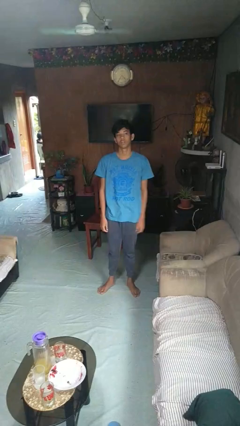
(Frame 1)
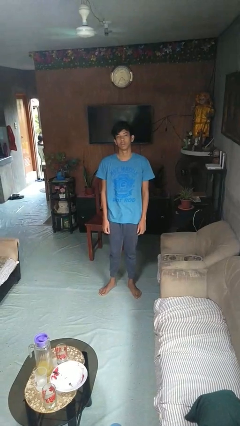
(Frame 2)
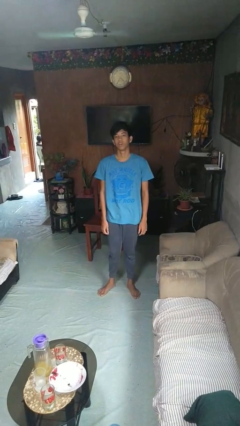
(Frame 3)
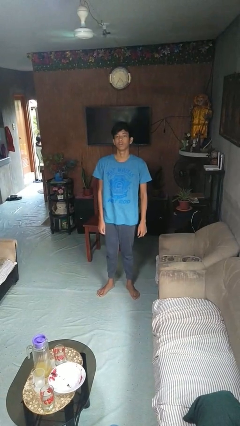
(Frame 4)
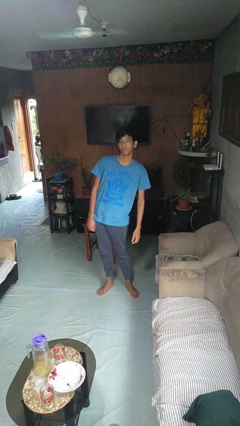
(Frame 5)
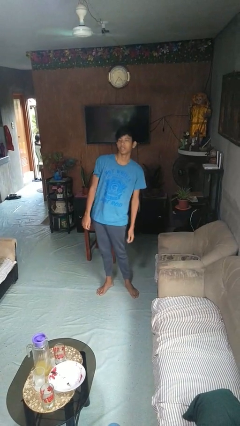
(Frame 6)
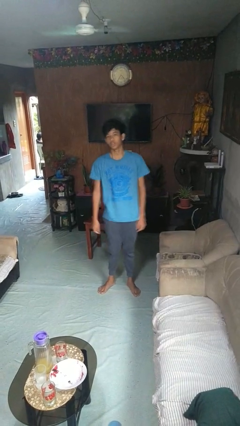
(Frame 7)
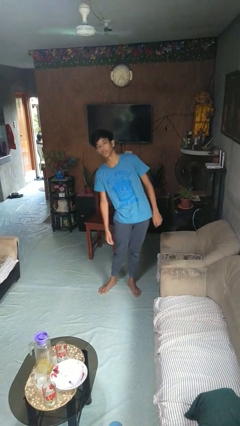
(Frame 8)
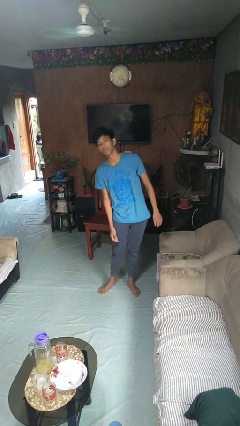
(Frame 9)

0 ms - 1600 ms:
person dances in place

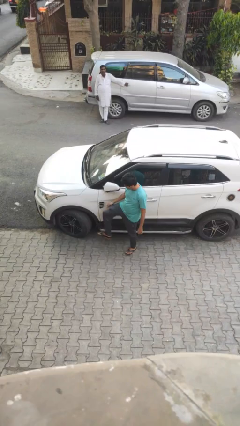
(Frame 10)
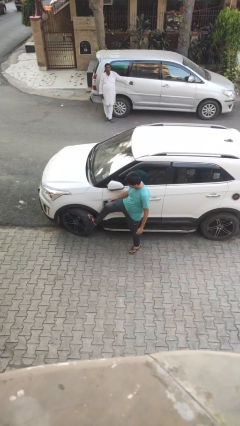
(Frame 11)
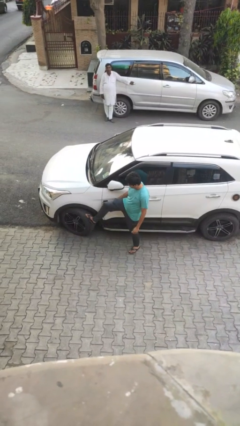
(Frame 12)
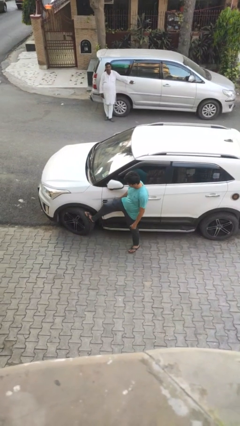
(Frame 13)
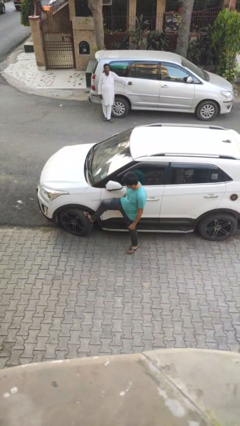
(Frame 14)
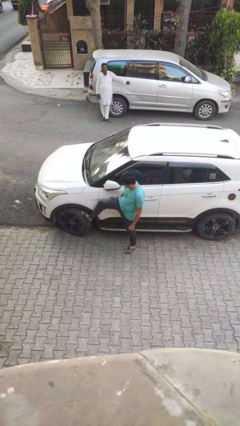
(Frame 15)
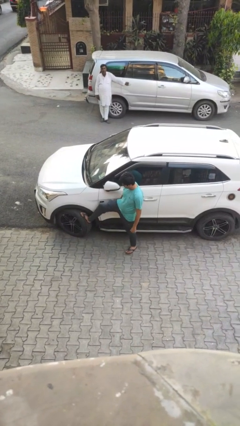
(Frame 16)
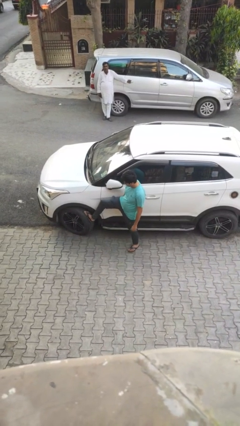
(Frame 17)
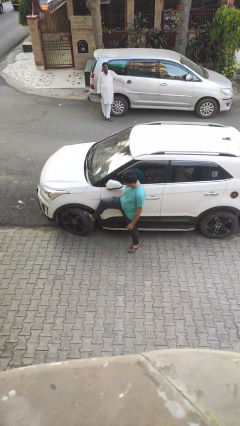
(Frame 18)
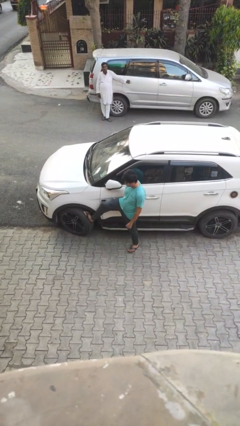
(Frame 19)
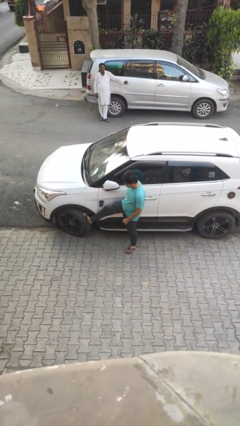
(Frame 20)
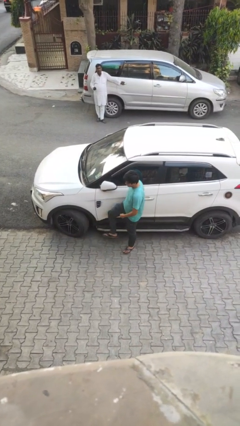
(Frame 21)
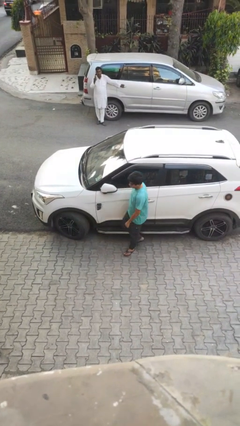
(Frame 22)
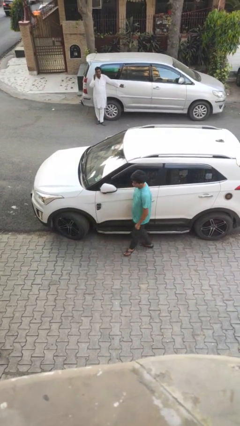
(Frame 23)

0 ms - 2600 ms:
person kicks car tires

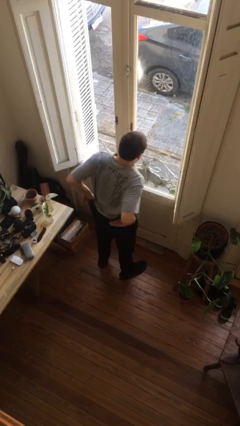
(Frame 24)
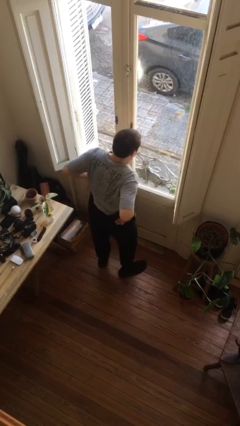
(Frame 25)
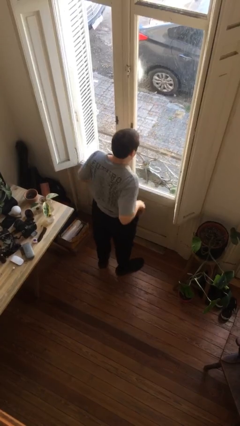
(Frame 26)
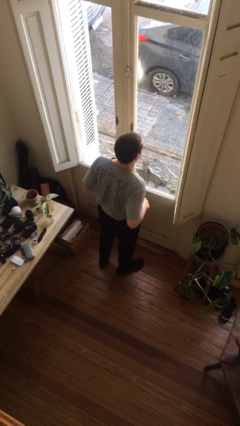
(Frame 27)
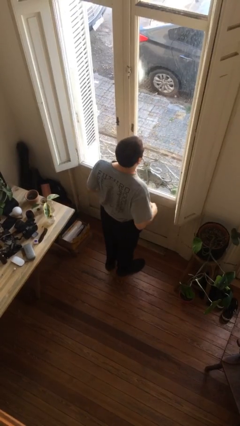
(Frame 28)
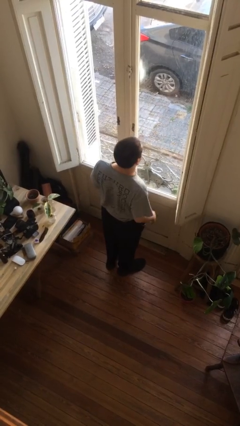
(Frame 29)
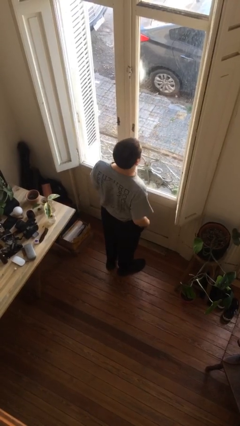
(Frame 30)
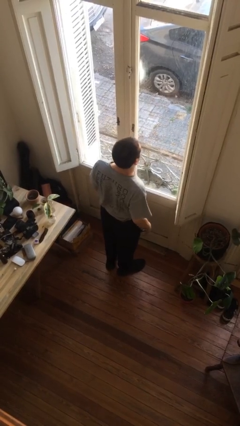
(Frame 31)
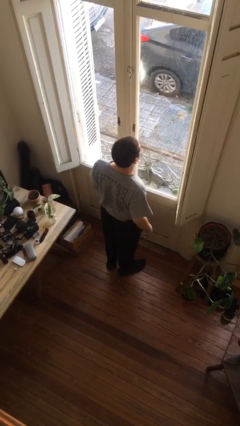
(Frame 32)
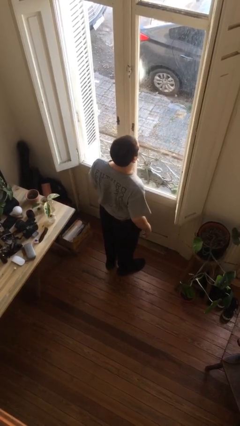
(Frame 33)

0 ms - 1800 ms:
person hikes up pants

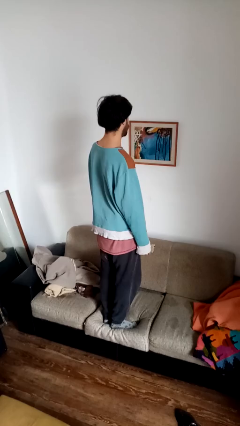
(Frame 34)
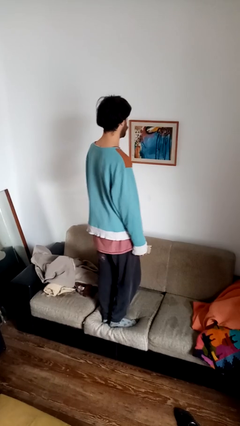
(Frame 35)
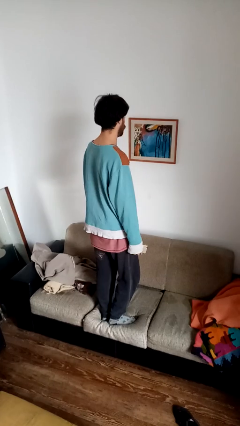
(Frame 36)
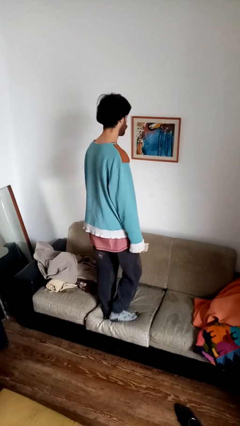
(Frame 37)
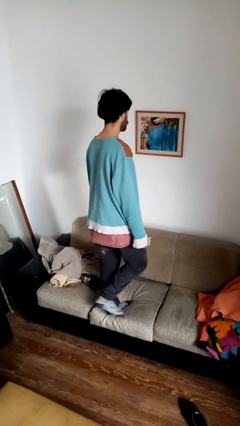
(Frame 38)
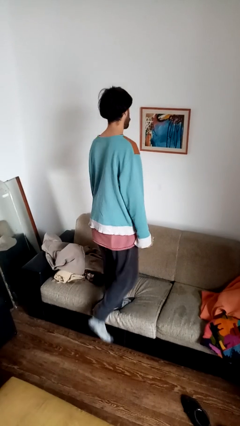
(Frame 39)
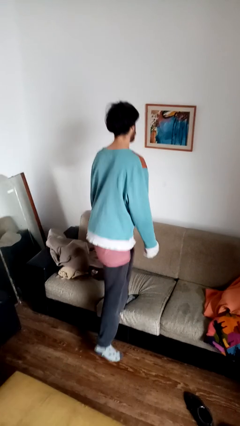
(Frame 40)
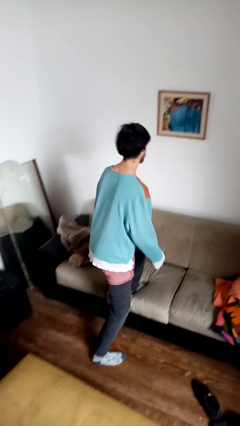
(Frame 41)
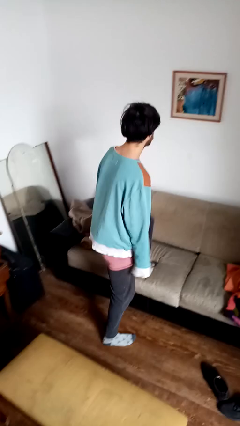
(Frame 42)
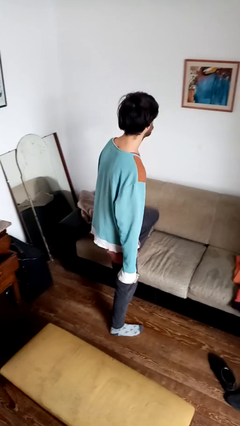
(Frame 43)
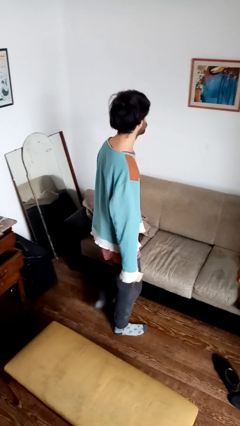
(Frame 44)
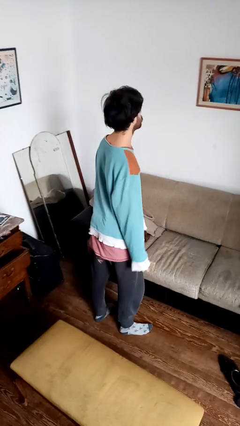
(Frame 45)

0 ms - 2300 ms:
person climbs off couch

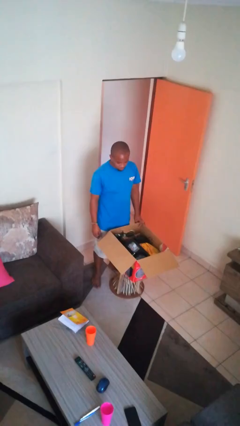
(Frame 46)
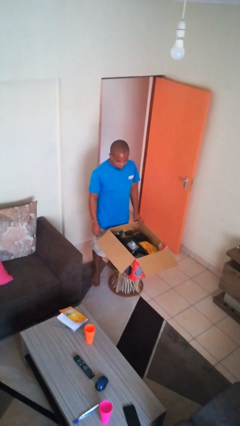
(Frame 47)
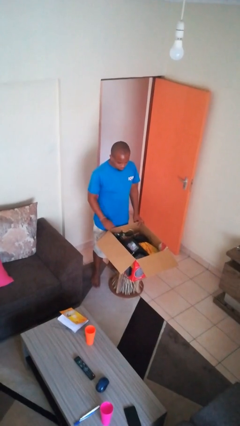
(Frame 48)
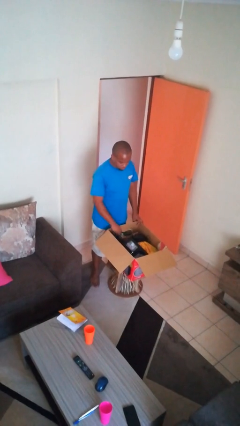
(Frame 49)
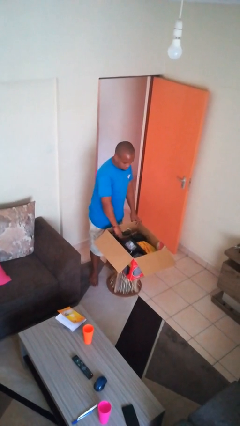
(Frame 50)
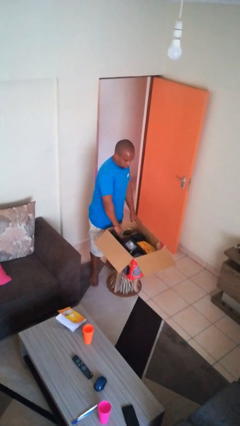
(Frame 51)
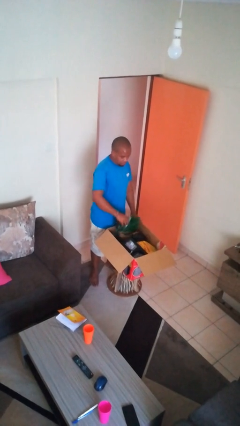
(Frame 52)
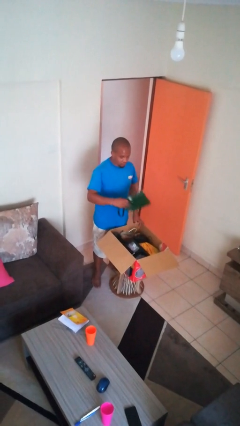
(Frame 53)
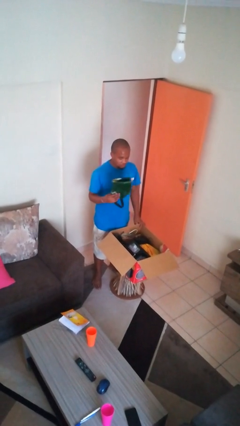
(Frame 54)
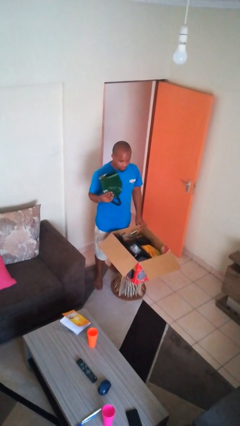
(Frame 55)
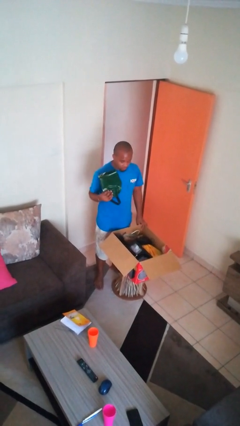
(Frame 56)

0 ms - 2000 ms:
person takes object from box

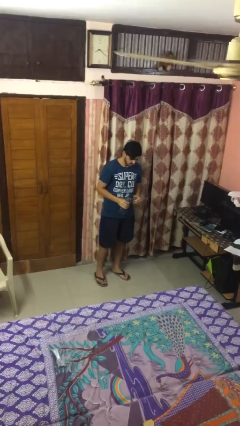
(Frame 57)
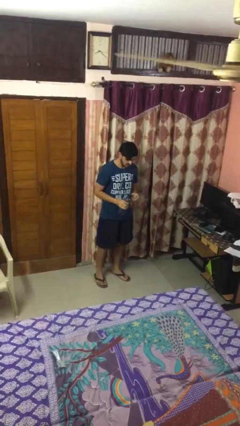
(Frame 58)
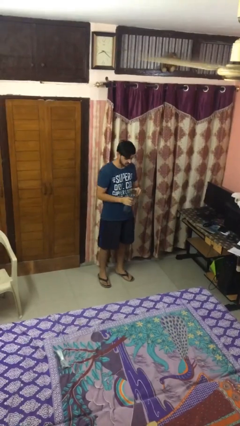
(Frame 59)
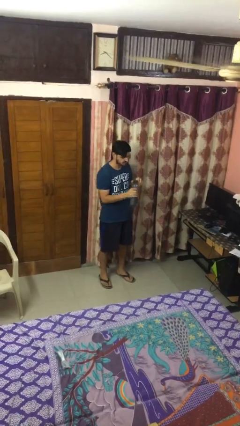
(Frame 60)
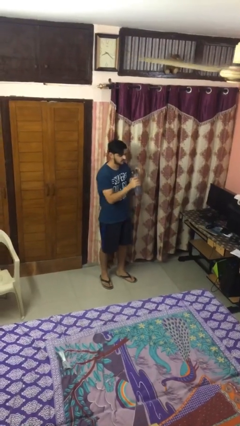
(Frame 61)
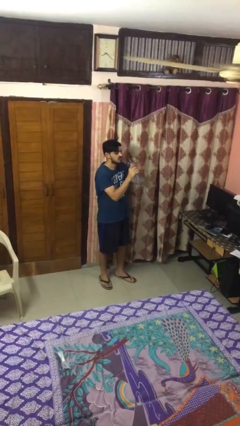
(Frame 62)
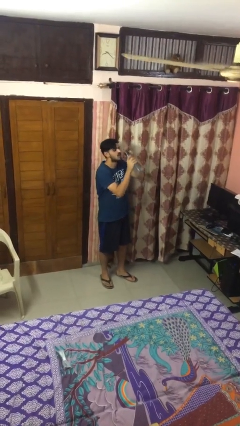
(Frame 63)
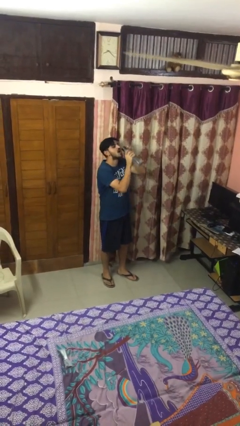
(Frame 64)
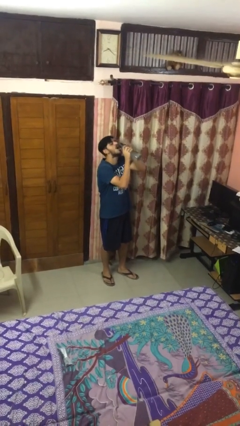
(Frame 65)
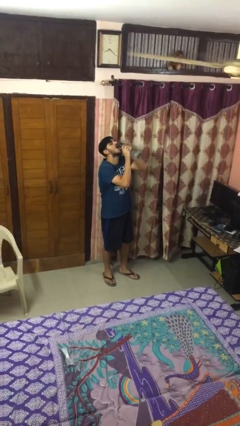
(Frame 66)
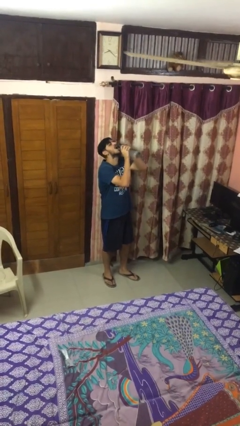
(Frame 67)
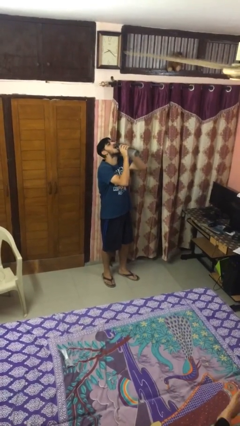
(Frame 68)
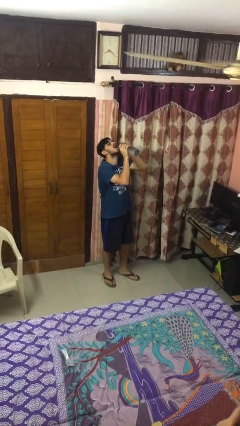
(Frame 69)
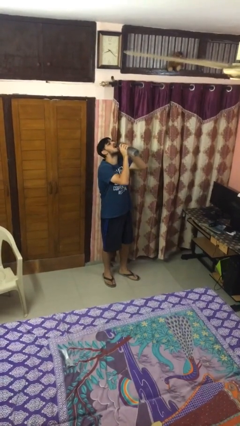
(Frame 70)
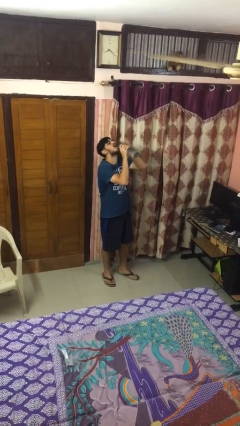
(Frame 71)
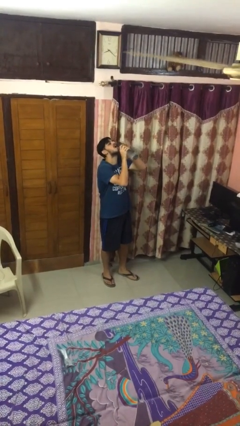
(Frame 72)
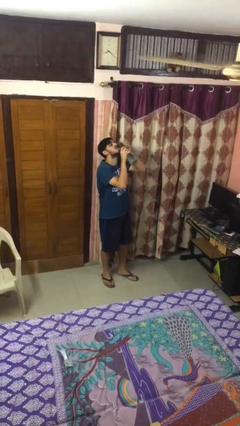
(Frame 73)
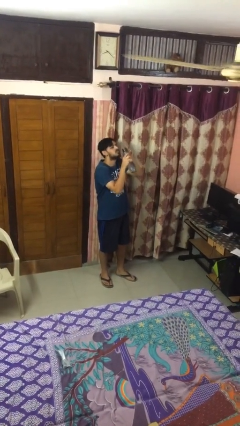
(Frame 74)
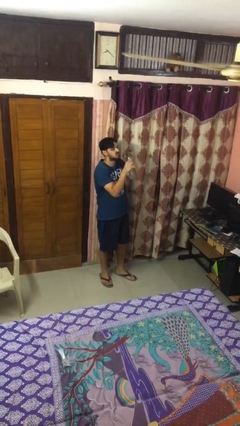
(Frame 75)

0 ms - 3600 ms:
person drinks from bottle

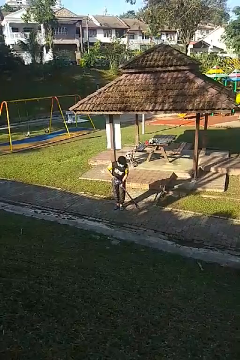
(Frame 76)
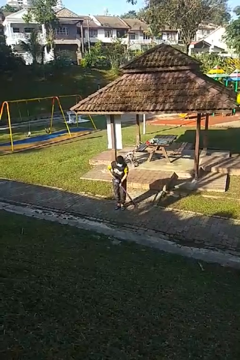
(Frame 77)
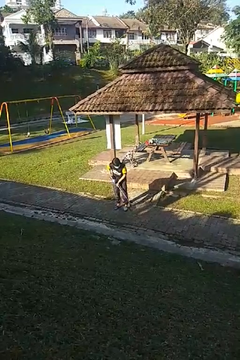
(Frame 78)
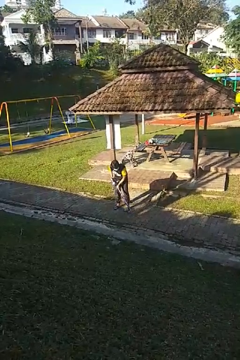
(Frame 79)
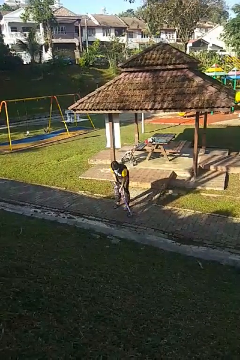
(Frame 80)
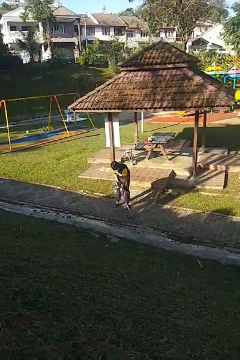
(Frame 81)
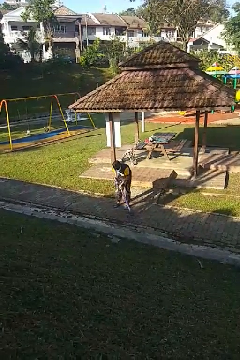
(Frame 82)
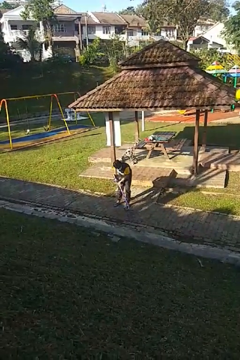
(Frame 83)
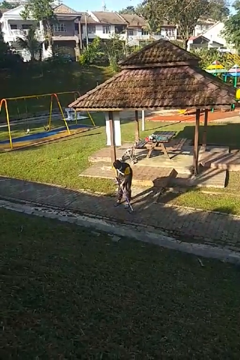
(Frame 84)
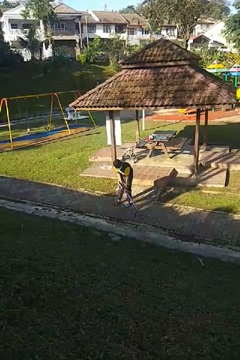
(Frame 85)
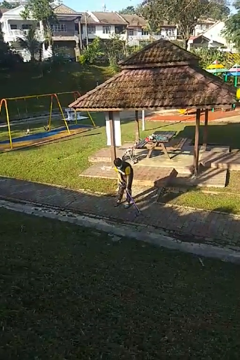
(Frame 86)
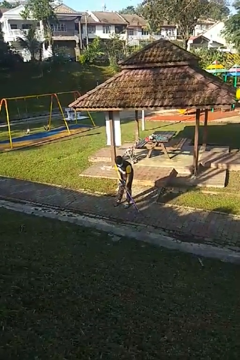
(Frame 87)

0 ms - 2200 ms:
person vacuums carpet

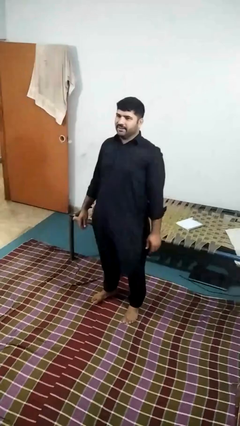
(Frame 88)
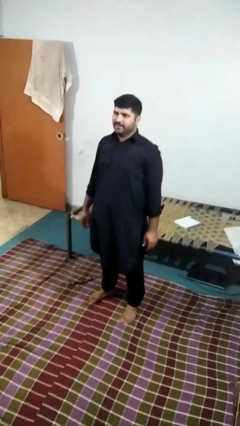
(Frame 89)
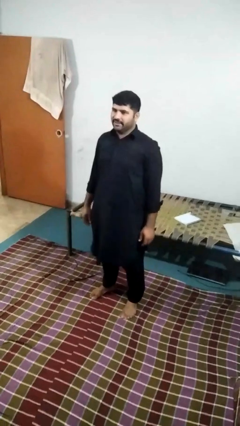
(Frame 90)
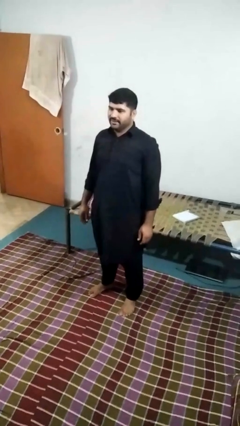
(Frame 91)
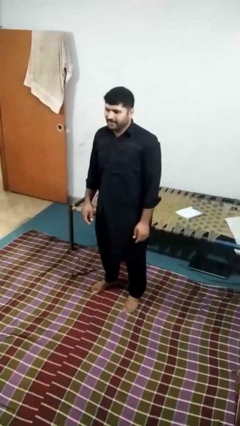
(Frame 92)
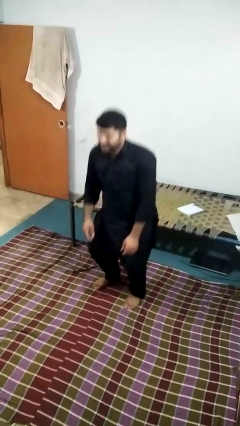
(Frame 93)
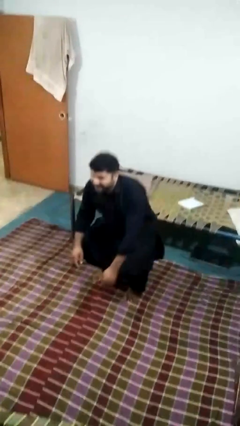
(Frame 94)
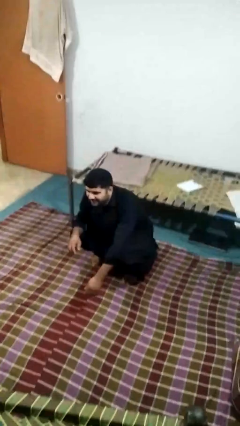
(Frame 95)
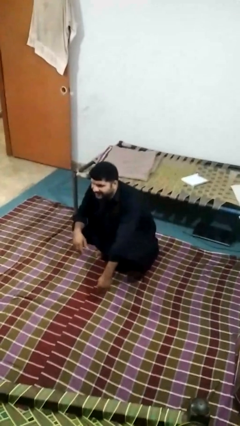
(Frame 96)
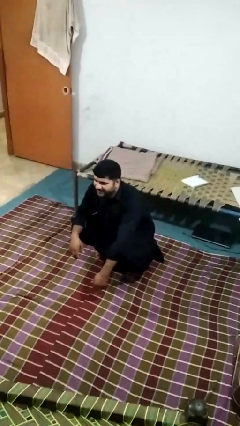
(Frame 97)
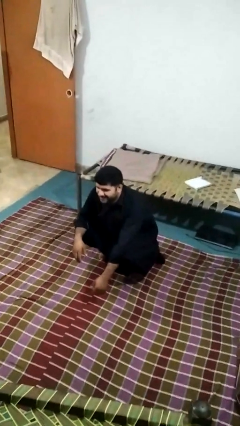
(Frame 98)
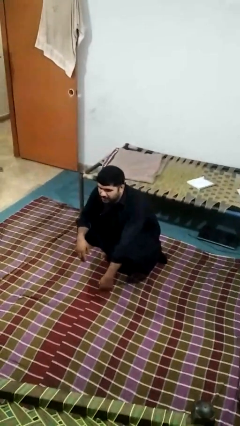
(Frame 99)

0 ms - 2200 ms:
person squats
